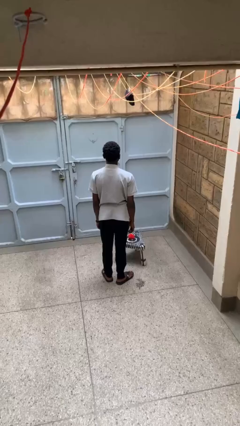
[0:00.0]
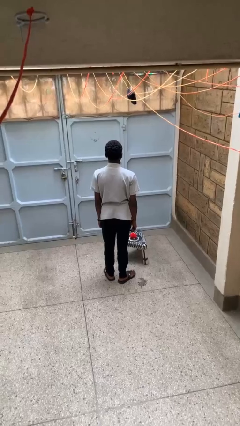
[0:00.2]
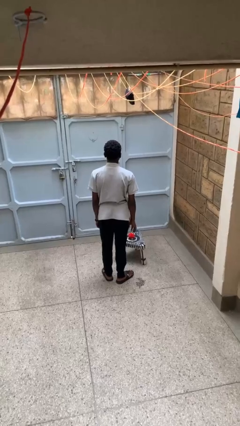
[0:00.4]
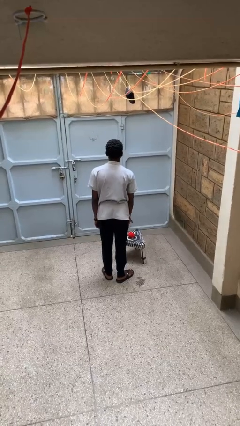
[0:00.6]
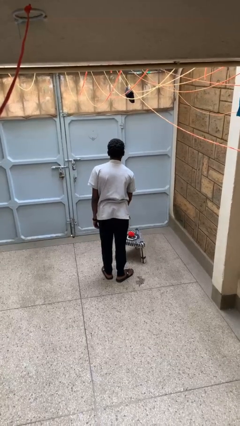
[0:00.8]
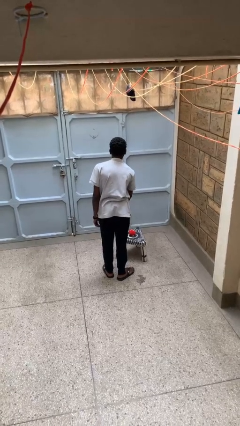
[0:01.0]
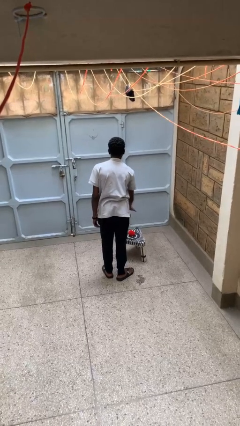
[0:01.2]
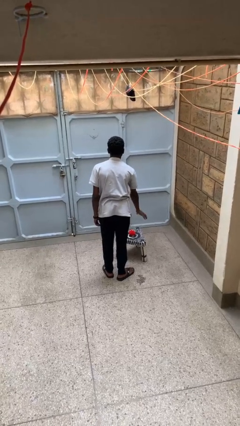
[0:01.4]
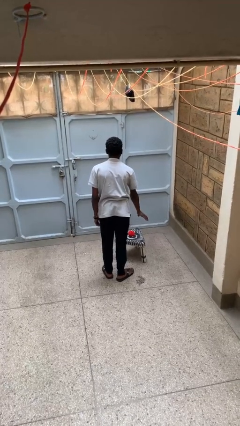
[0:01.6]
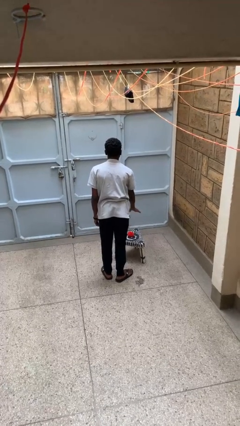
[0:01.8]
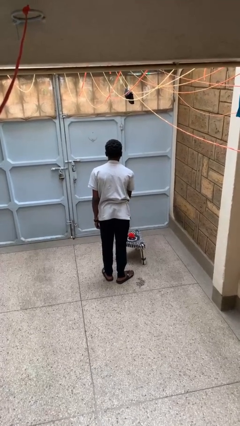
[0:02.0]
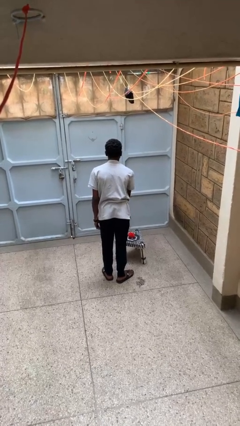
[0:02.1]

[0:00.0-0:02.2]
person waves hand over object

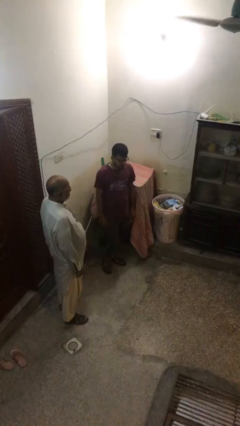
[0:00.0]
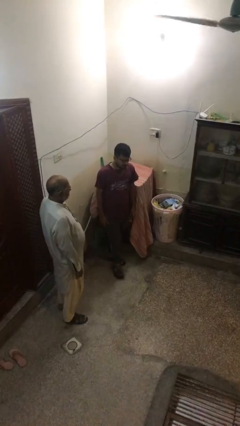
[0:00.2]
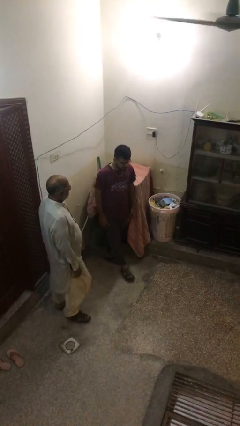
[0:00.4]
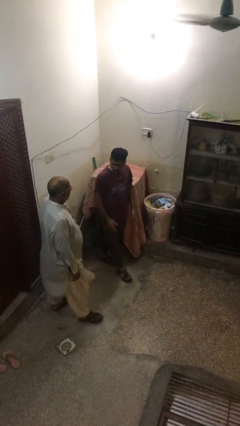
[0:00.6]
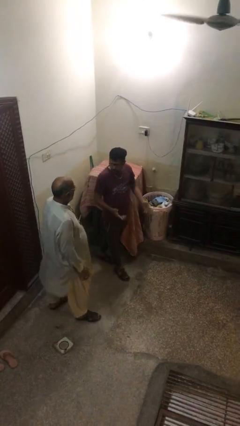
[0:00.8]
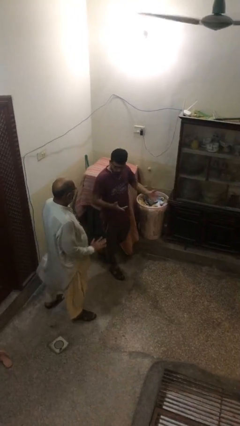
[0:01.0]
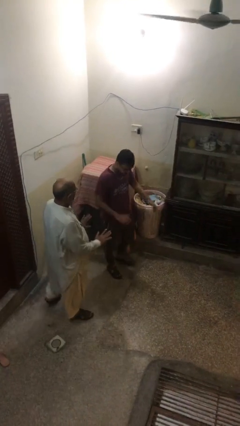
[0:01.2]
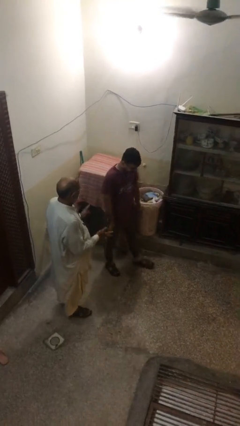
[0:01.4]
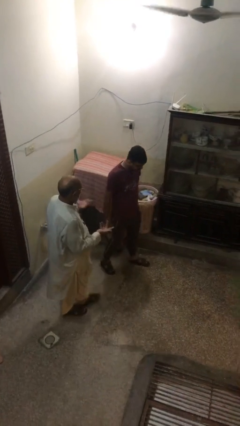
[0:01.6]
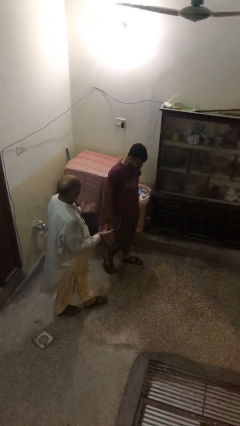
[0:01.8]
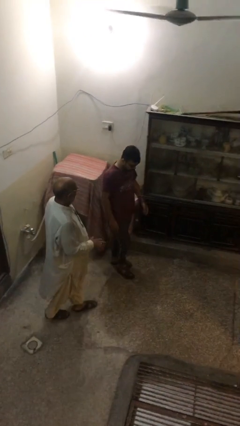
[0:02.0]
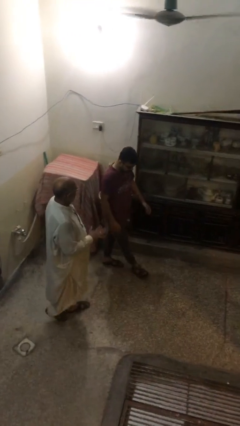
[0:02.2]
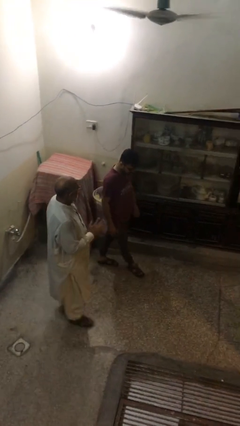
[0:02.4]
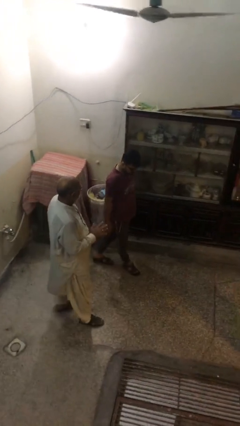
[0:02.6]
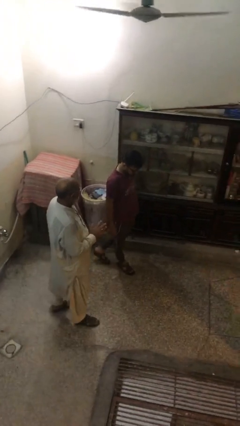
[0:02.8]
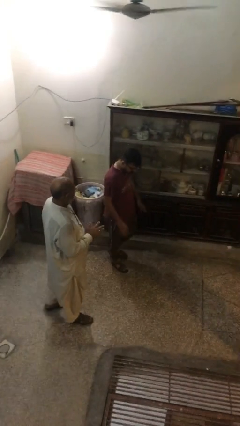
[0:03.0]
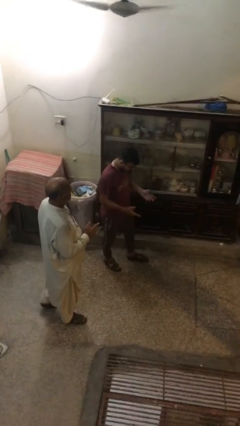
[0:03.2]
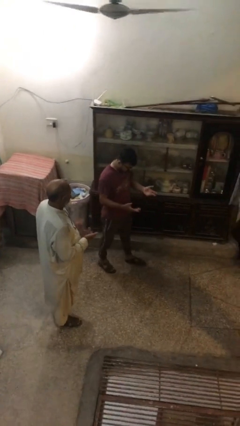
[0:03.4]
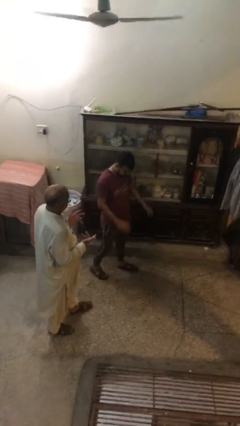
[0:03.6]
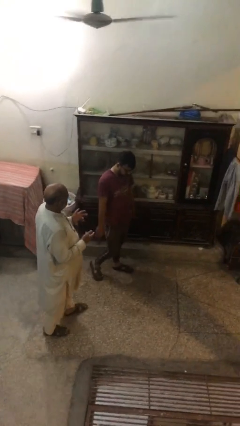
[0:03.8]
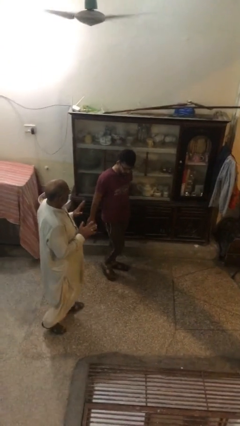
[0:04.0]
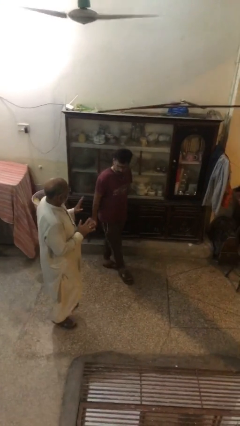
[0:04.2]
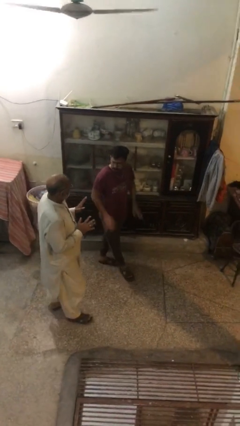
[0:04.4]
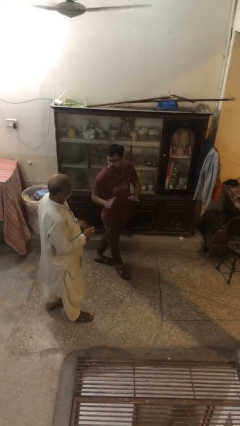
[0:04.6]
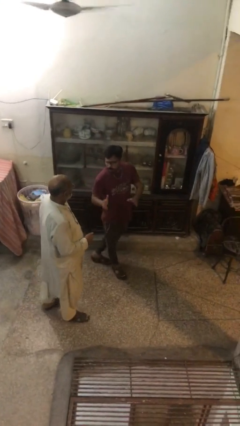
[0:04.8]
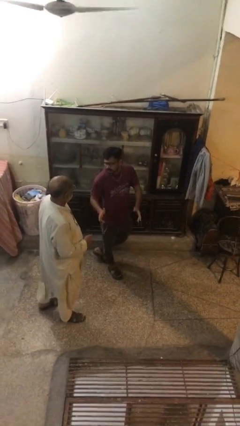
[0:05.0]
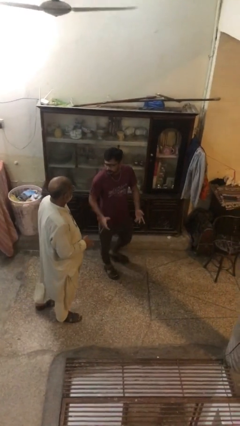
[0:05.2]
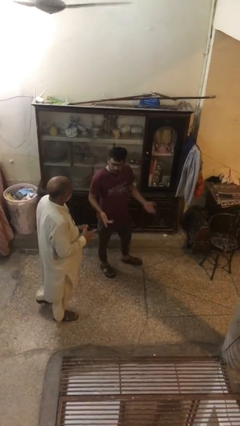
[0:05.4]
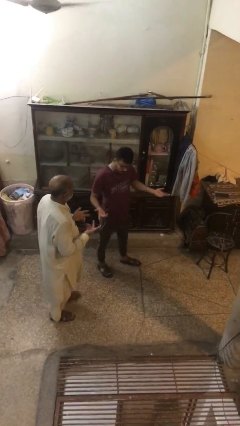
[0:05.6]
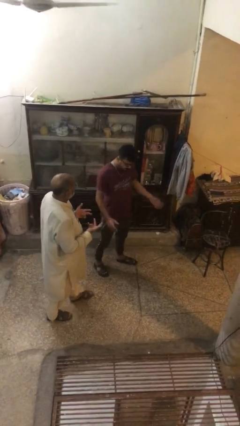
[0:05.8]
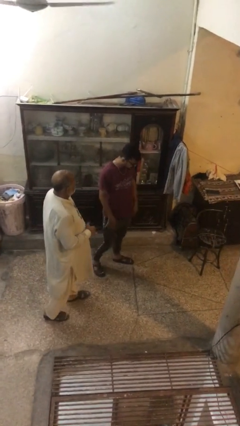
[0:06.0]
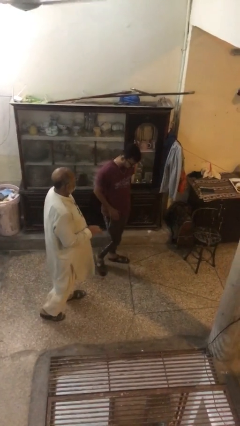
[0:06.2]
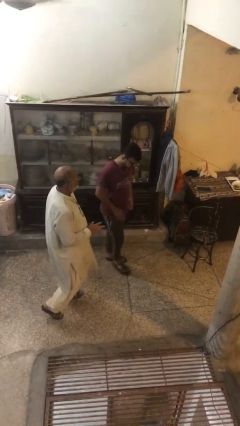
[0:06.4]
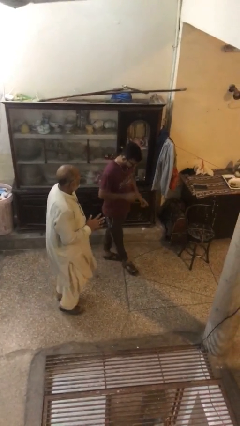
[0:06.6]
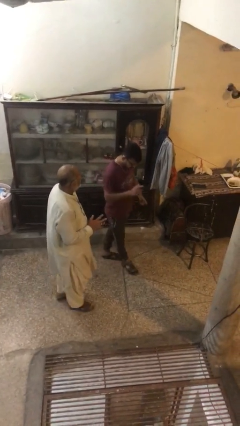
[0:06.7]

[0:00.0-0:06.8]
person talks to person

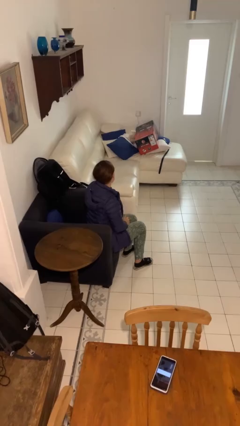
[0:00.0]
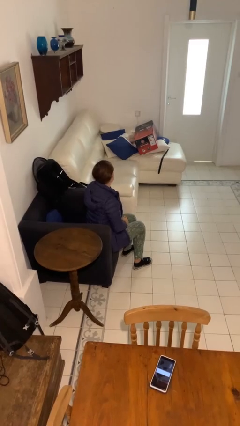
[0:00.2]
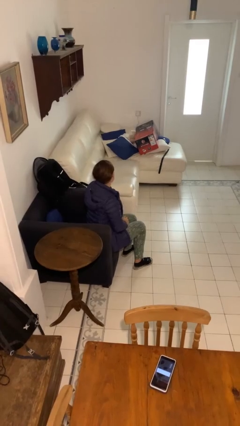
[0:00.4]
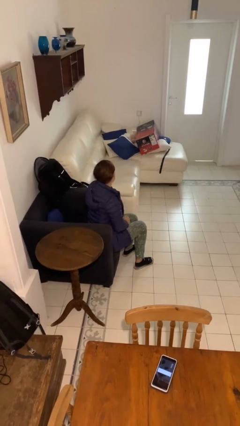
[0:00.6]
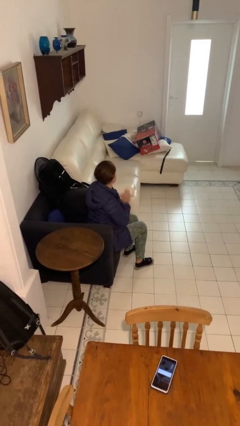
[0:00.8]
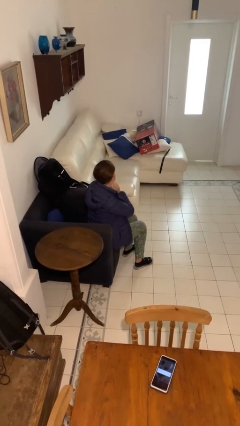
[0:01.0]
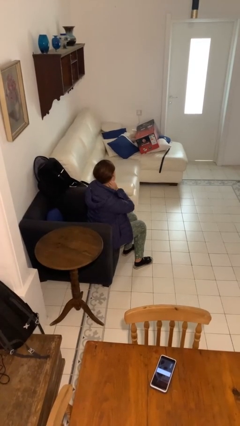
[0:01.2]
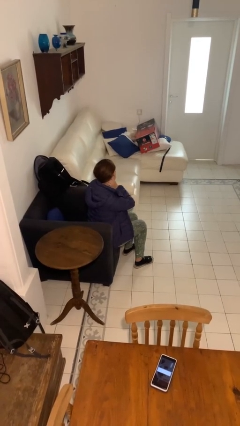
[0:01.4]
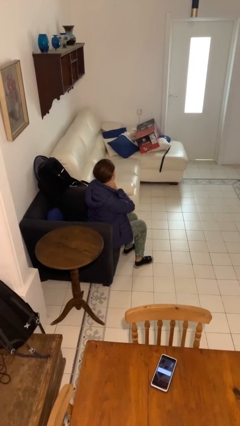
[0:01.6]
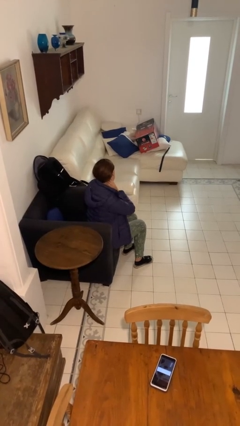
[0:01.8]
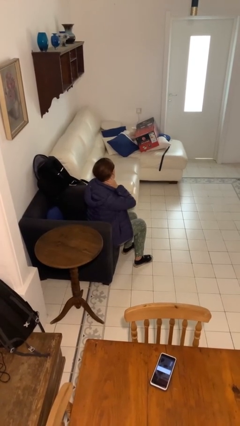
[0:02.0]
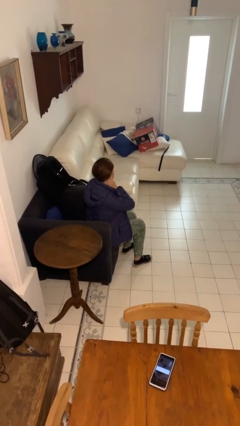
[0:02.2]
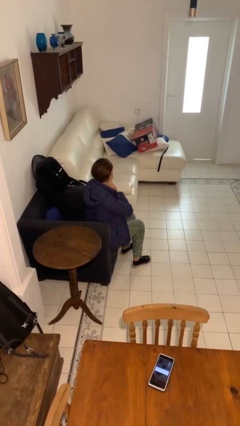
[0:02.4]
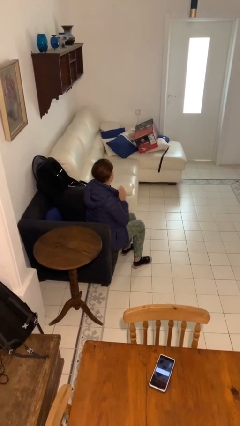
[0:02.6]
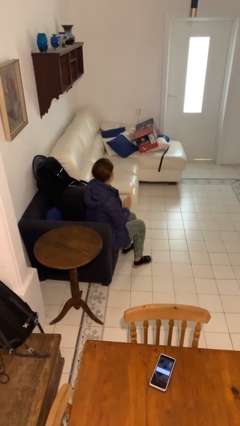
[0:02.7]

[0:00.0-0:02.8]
person rubs neck

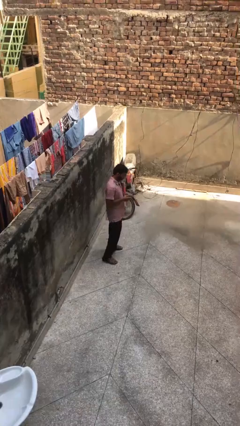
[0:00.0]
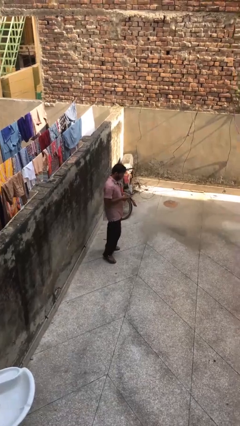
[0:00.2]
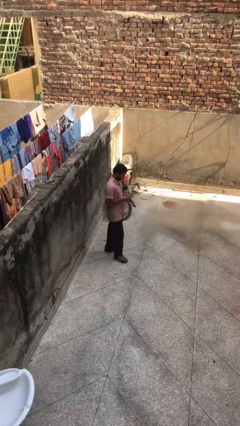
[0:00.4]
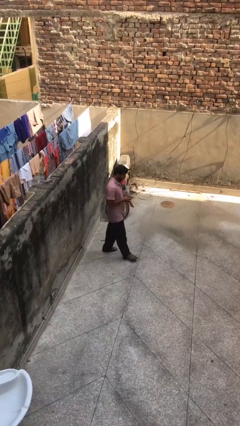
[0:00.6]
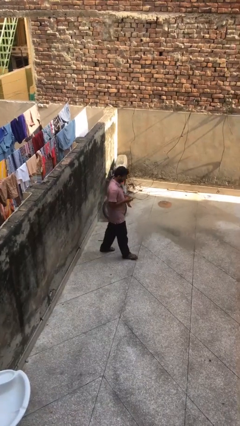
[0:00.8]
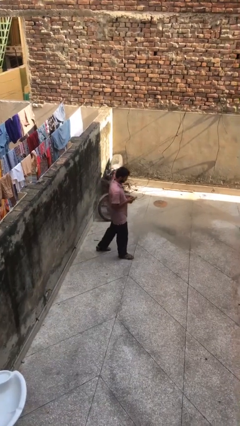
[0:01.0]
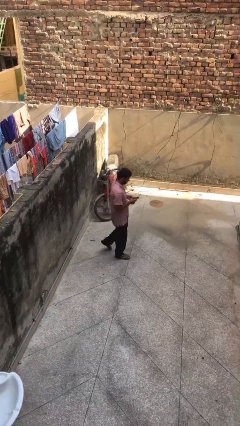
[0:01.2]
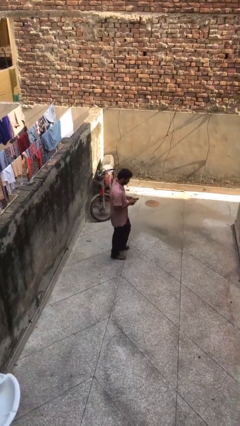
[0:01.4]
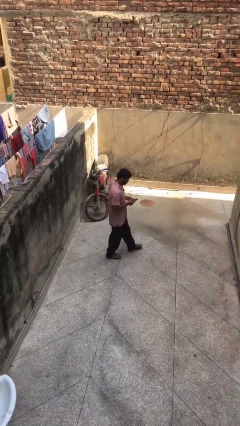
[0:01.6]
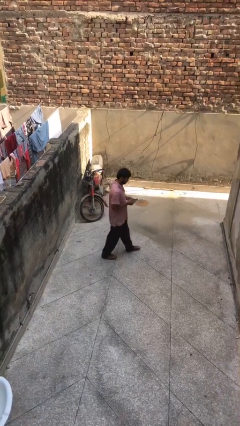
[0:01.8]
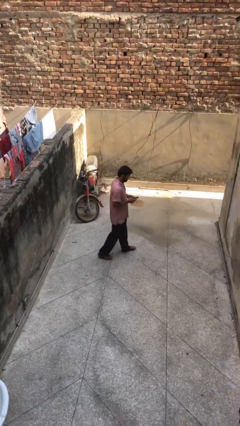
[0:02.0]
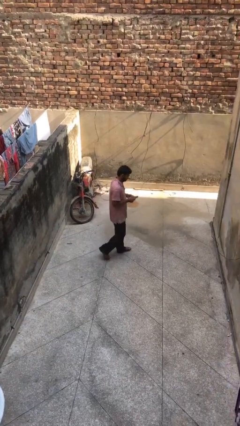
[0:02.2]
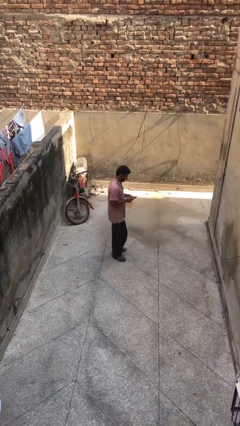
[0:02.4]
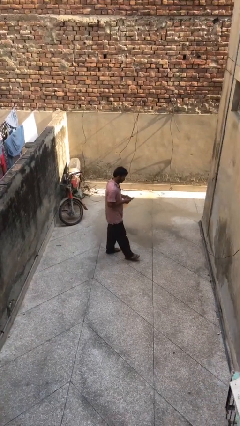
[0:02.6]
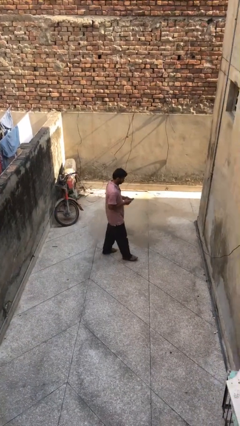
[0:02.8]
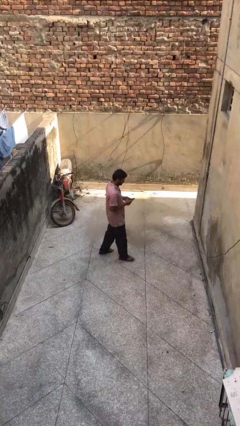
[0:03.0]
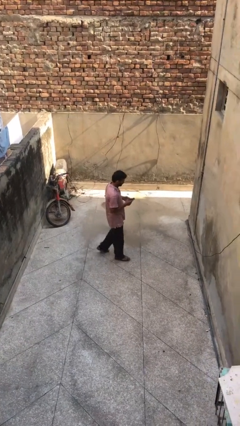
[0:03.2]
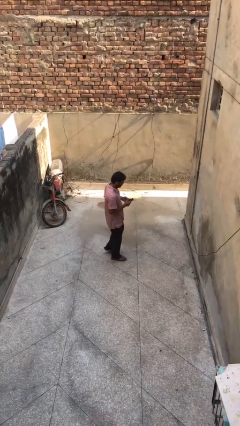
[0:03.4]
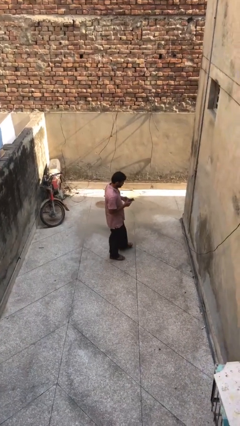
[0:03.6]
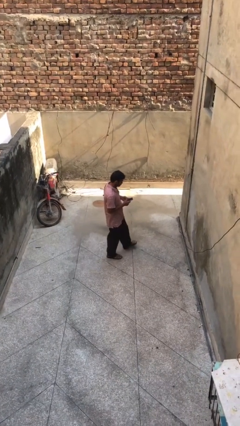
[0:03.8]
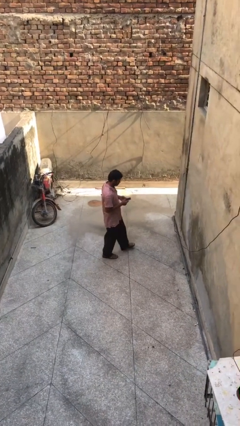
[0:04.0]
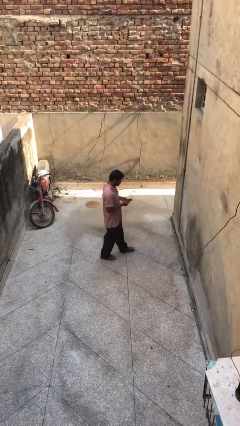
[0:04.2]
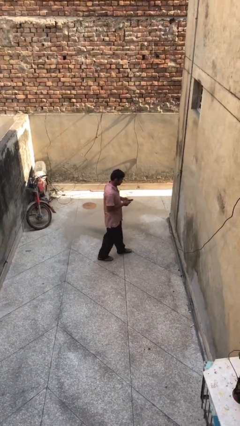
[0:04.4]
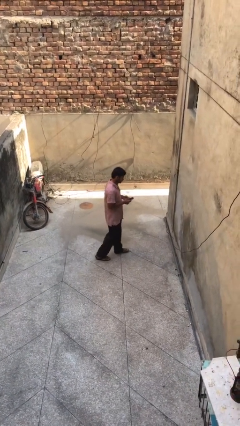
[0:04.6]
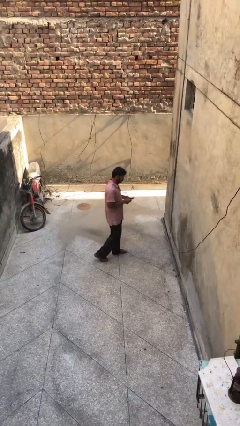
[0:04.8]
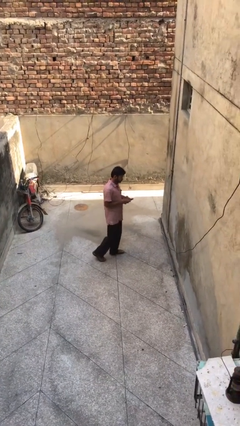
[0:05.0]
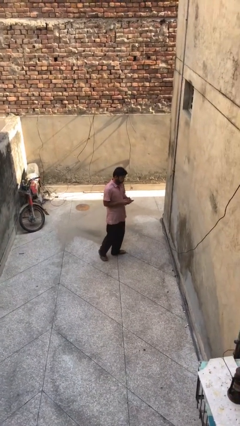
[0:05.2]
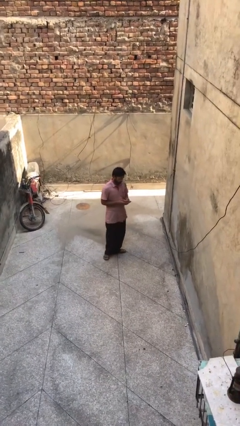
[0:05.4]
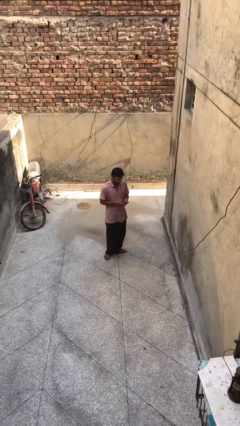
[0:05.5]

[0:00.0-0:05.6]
person texts on phone

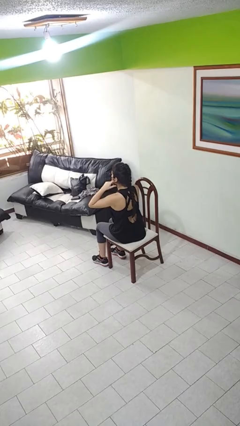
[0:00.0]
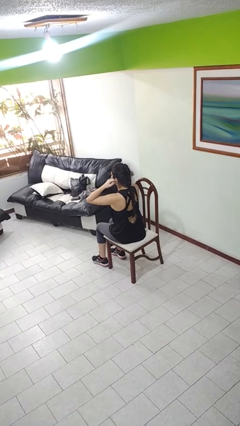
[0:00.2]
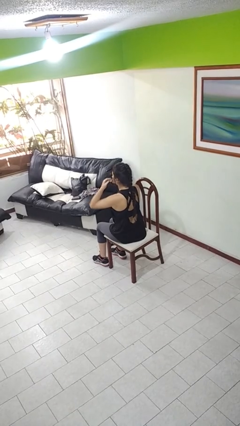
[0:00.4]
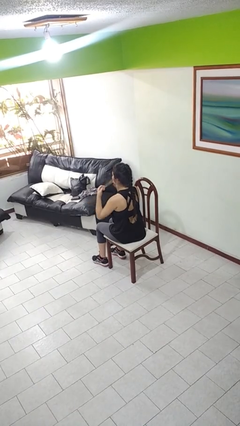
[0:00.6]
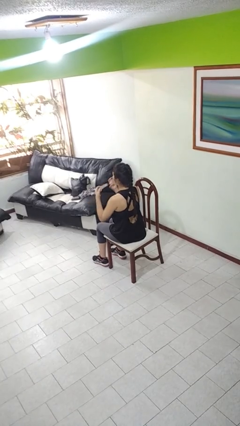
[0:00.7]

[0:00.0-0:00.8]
person takes off facemask
